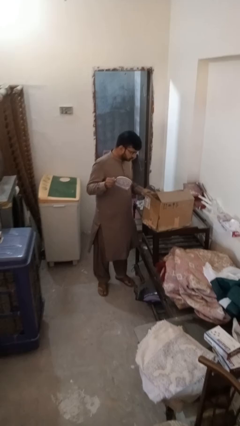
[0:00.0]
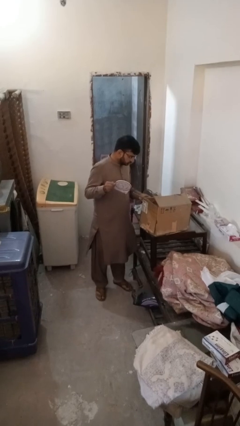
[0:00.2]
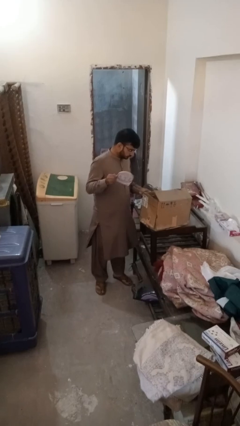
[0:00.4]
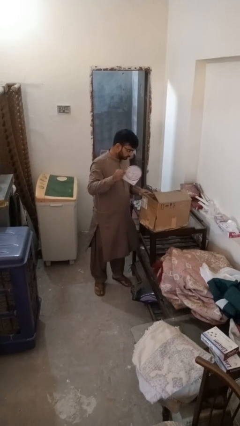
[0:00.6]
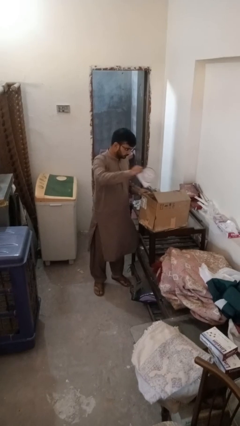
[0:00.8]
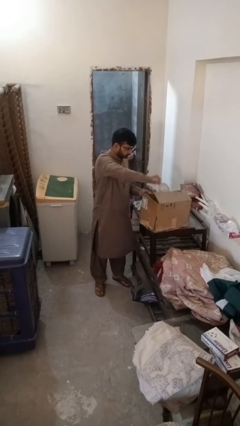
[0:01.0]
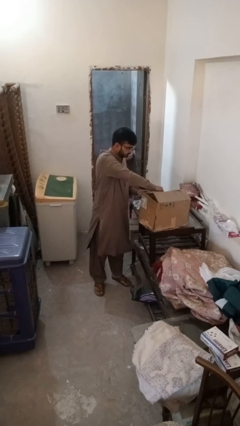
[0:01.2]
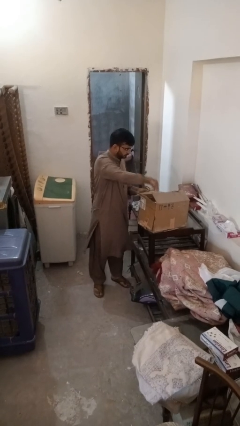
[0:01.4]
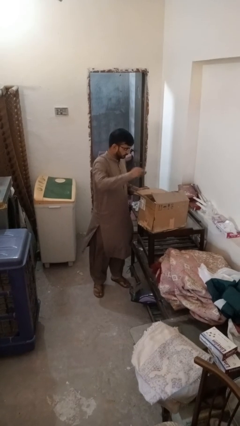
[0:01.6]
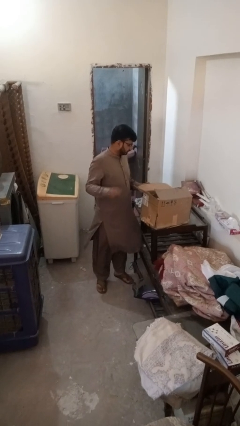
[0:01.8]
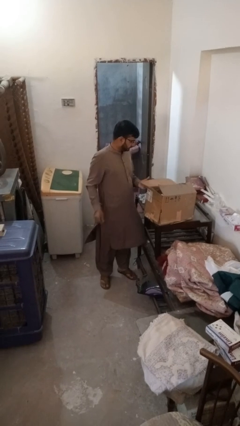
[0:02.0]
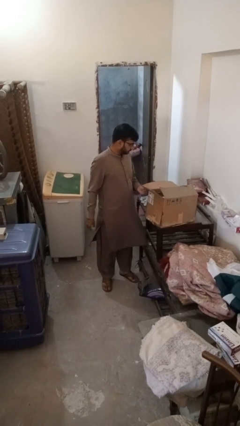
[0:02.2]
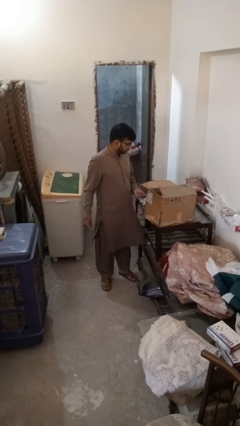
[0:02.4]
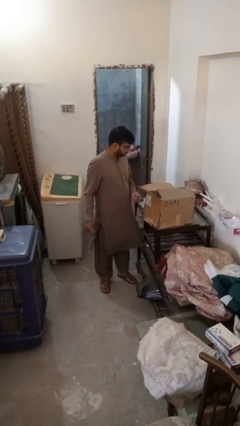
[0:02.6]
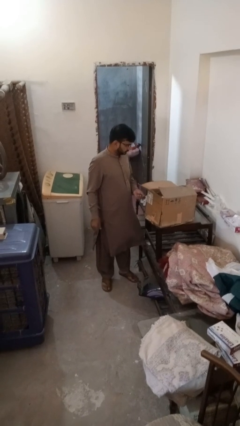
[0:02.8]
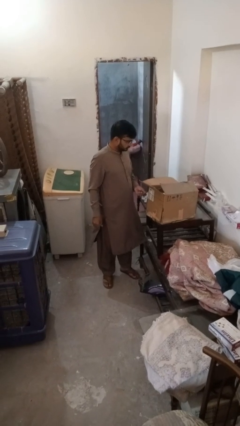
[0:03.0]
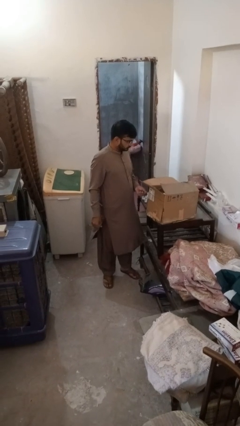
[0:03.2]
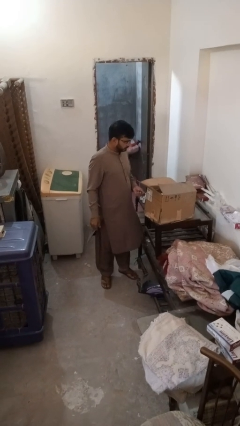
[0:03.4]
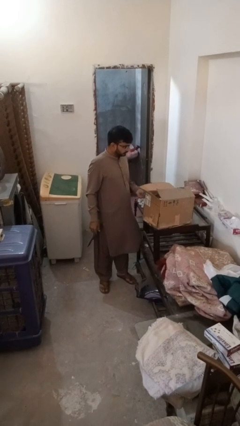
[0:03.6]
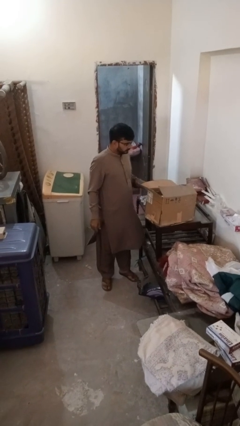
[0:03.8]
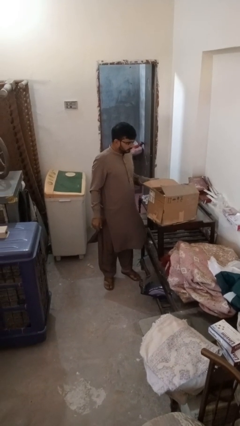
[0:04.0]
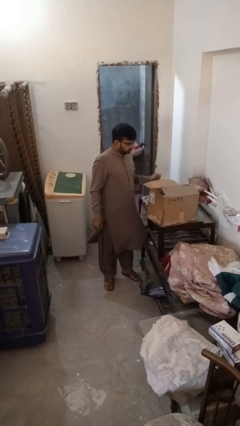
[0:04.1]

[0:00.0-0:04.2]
person puts object into box

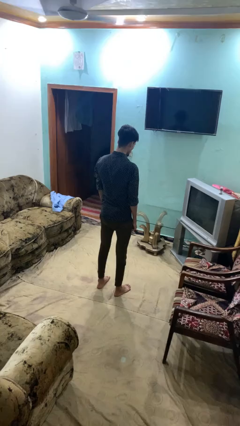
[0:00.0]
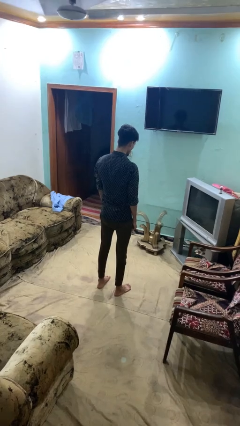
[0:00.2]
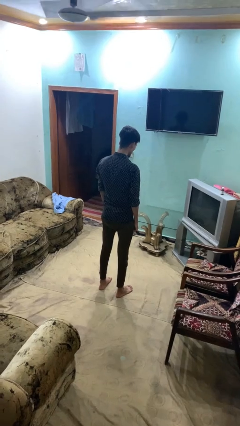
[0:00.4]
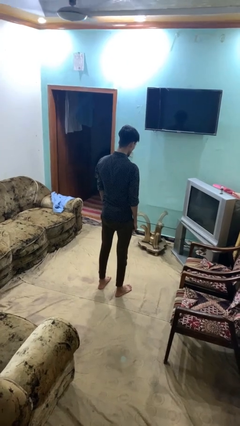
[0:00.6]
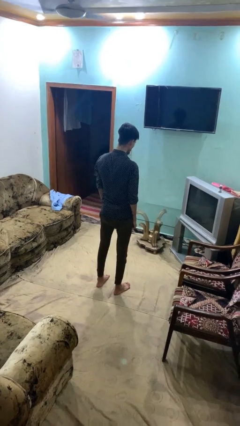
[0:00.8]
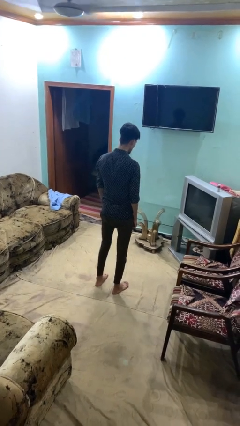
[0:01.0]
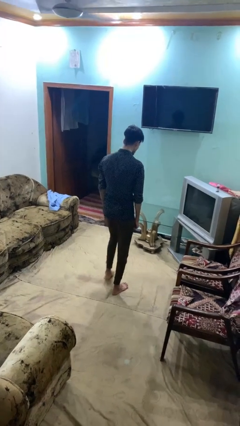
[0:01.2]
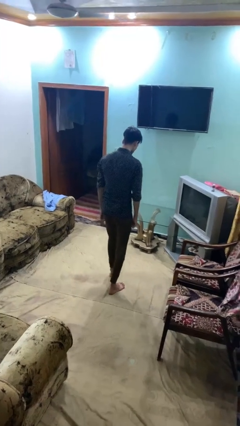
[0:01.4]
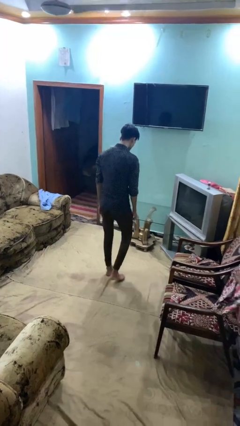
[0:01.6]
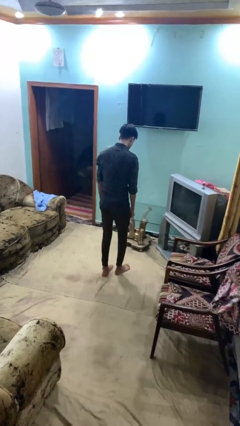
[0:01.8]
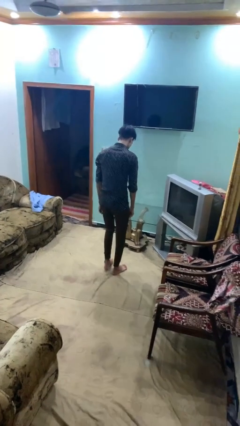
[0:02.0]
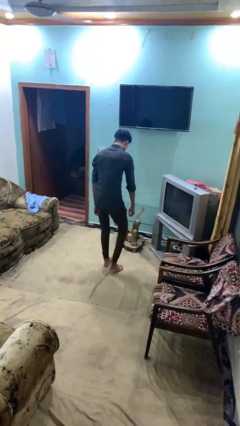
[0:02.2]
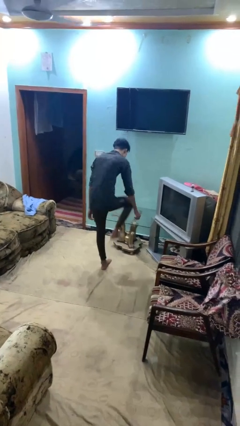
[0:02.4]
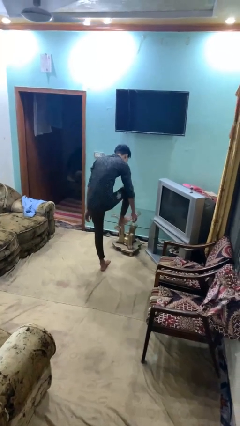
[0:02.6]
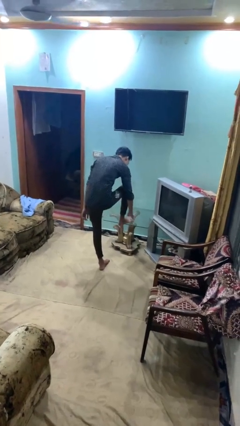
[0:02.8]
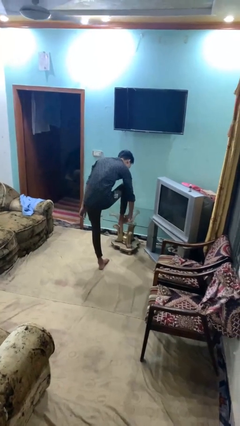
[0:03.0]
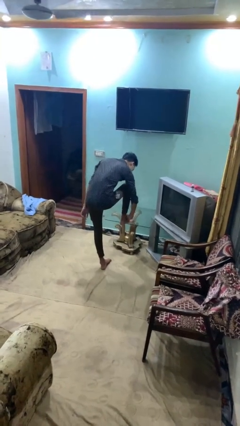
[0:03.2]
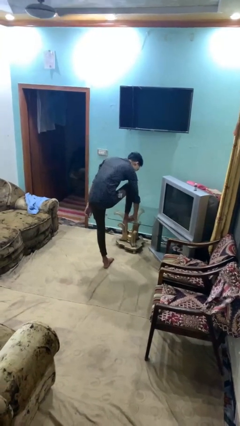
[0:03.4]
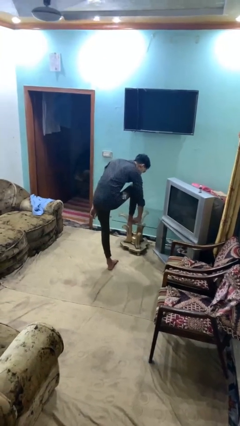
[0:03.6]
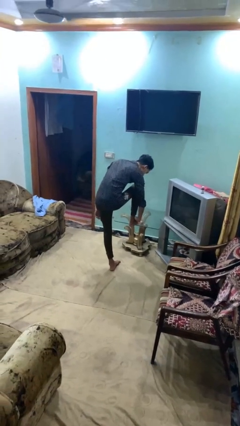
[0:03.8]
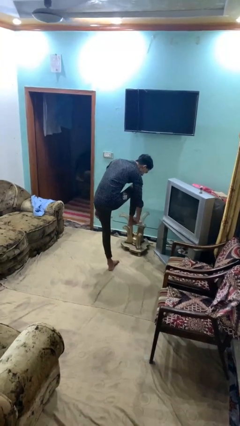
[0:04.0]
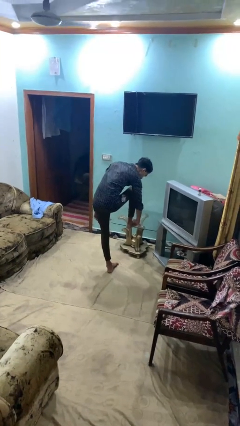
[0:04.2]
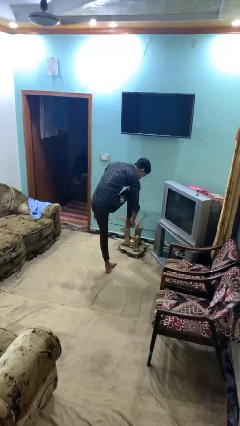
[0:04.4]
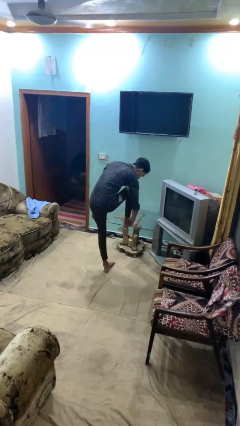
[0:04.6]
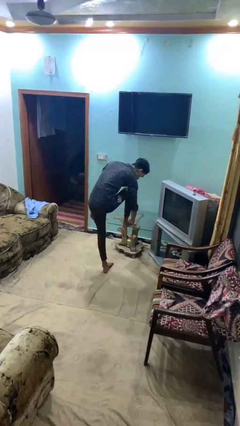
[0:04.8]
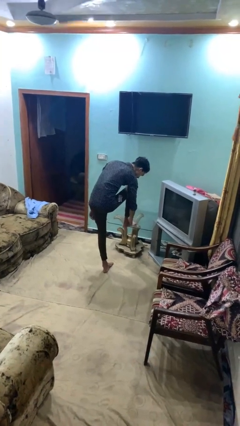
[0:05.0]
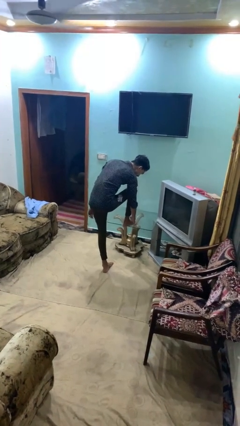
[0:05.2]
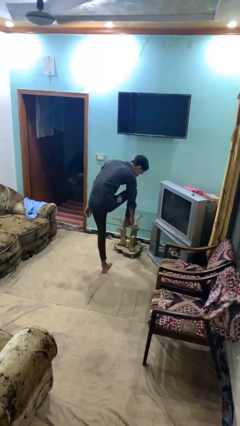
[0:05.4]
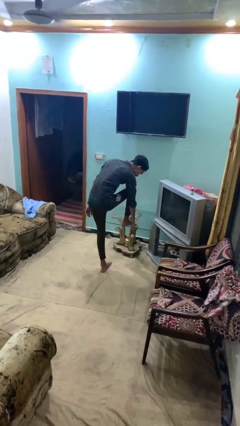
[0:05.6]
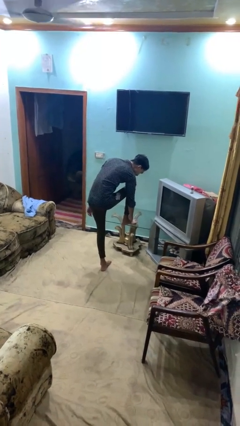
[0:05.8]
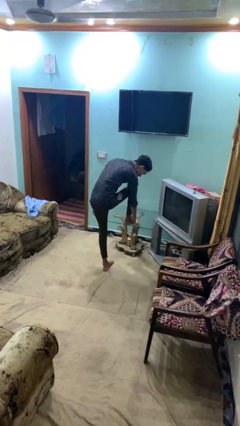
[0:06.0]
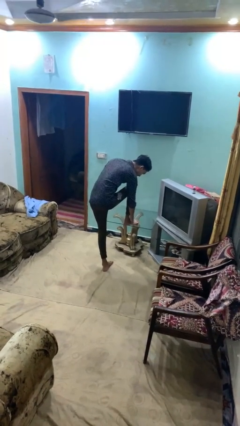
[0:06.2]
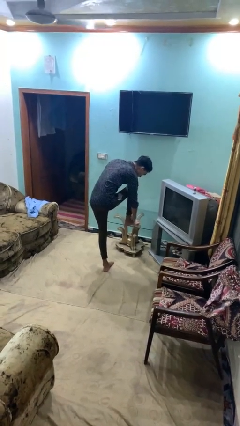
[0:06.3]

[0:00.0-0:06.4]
person stubs toe

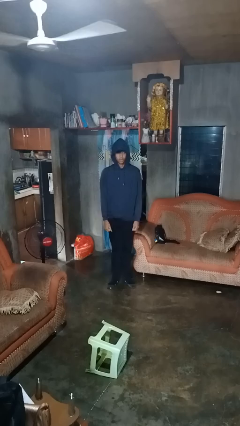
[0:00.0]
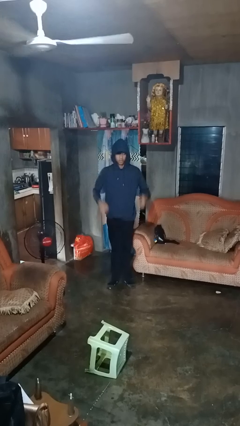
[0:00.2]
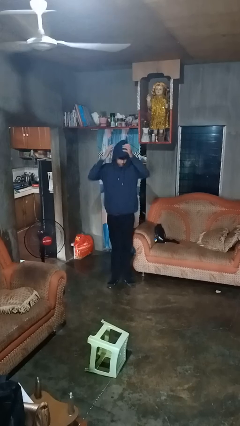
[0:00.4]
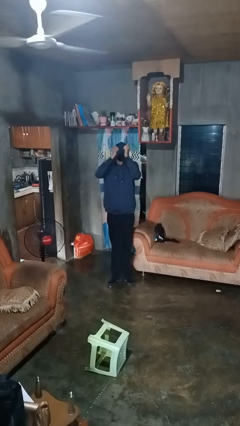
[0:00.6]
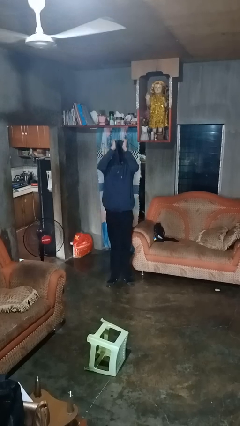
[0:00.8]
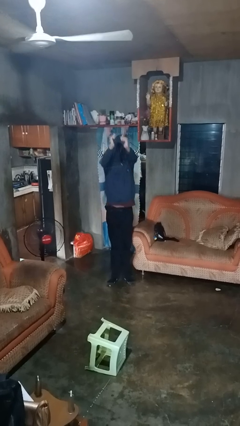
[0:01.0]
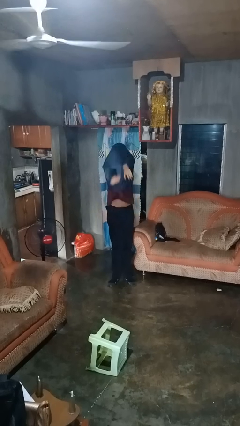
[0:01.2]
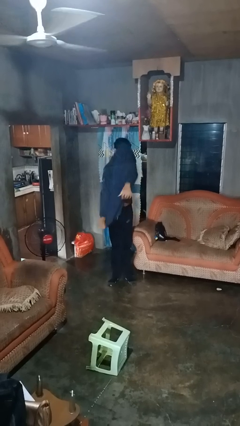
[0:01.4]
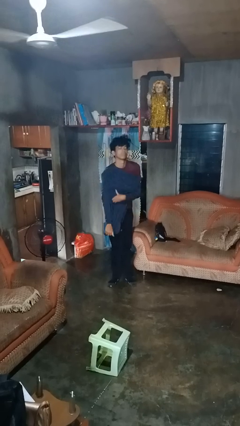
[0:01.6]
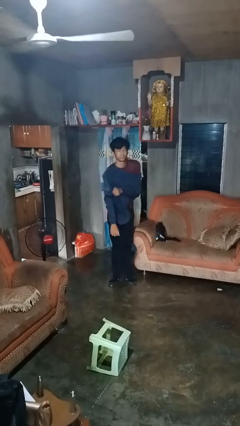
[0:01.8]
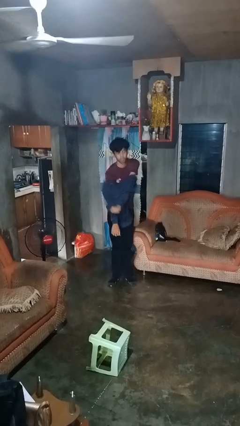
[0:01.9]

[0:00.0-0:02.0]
person takes off hoodie

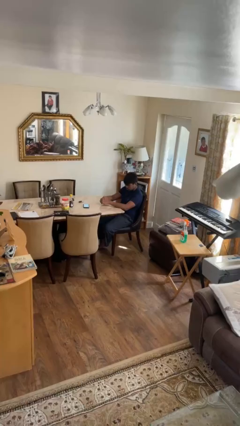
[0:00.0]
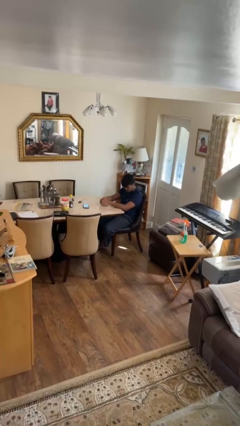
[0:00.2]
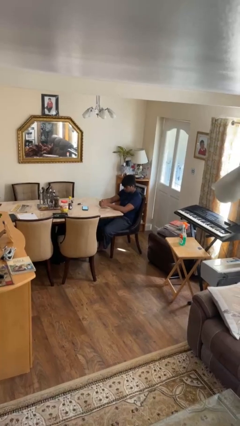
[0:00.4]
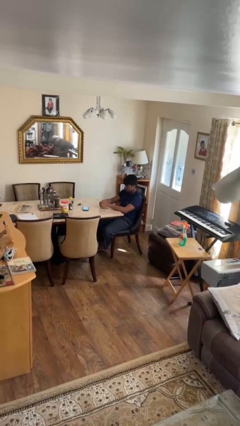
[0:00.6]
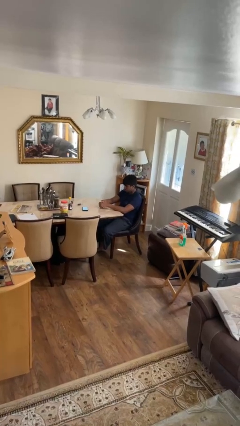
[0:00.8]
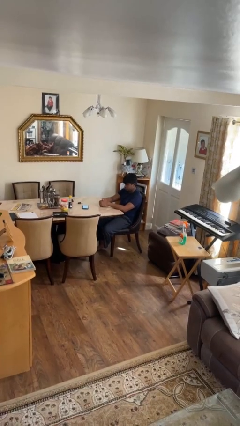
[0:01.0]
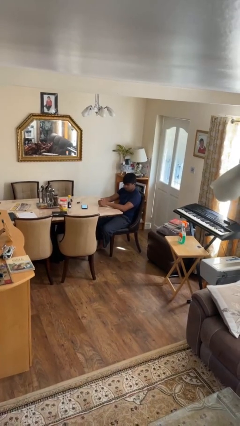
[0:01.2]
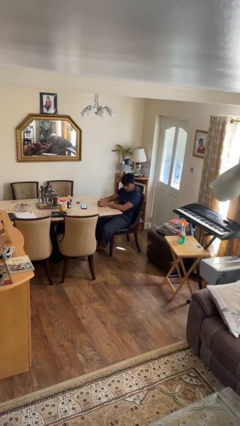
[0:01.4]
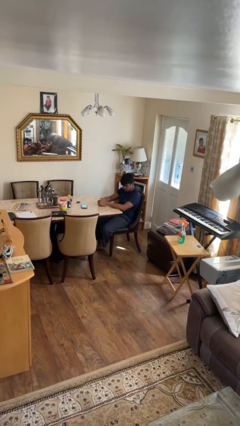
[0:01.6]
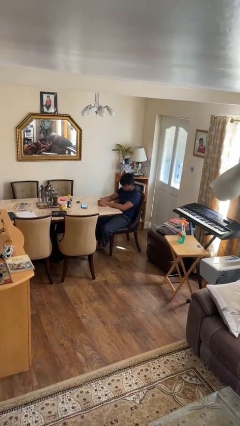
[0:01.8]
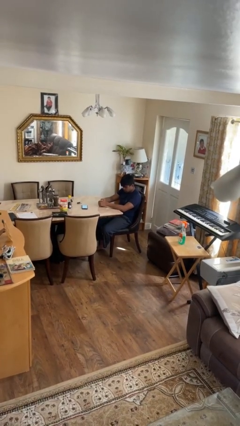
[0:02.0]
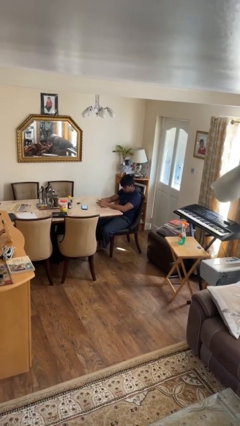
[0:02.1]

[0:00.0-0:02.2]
person shakes head

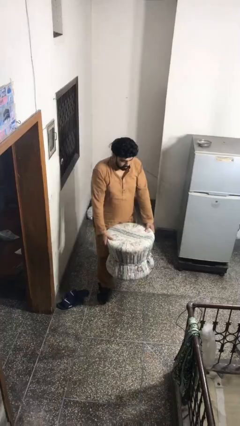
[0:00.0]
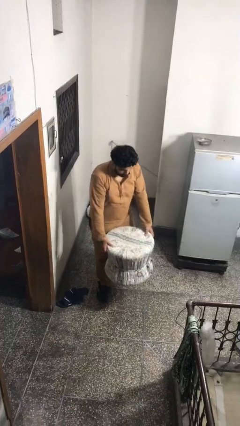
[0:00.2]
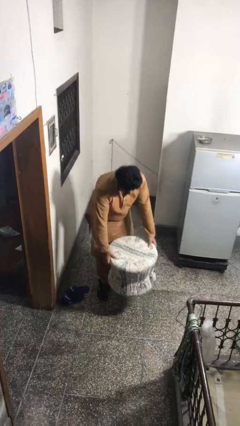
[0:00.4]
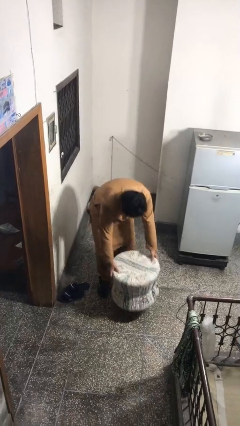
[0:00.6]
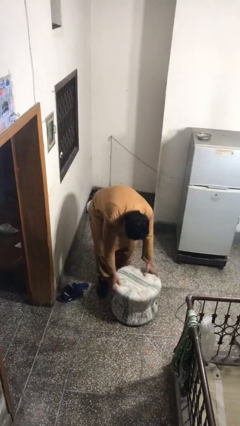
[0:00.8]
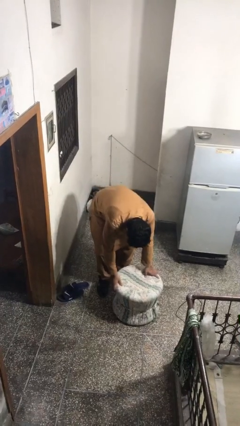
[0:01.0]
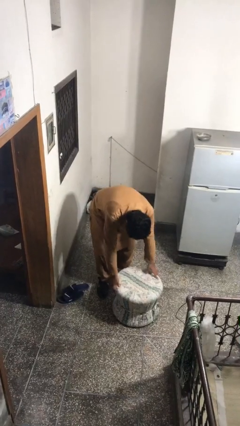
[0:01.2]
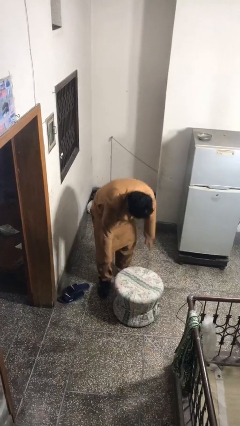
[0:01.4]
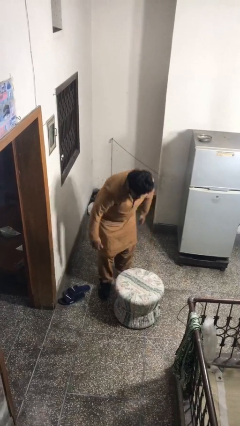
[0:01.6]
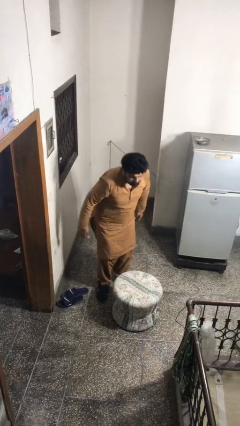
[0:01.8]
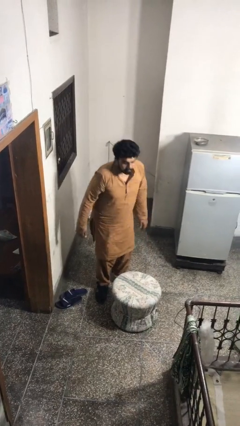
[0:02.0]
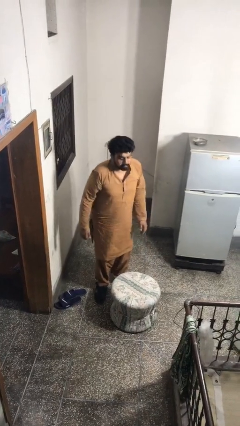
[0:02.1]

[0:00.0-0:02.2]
person puts down object on floor

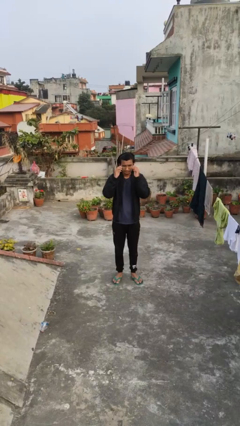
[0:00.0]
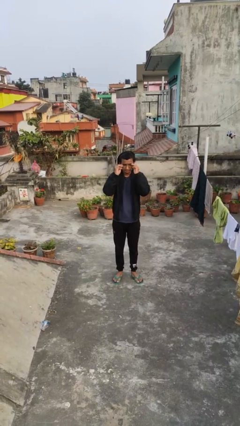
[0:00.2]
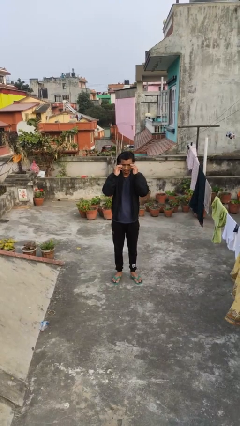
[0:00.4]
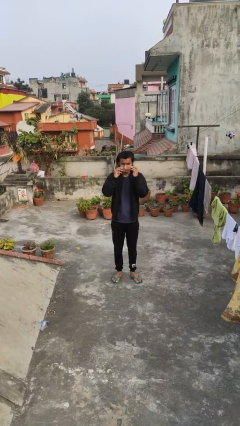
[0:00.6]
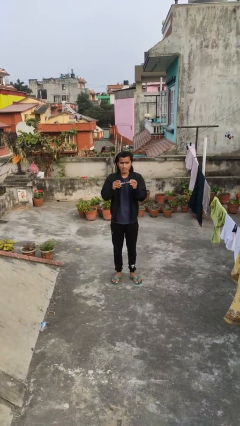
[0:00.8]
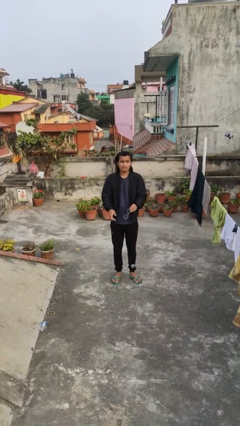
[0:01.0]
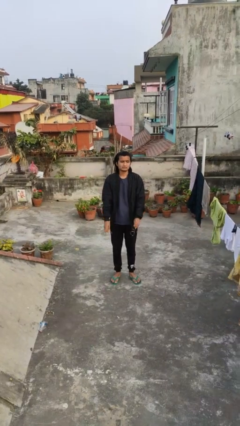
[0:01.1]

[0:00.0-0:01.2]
person takes off glasses
